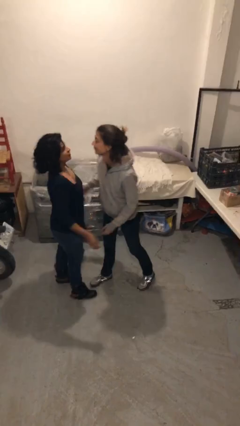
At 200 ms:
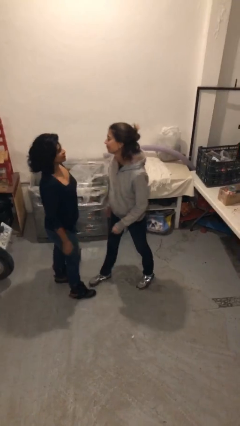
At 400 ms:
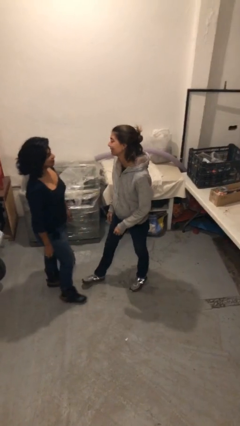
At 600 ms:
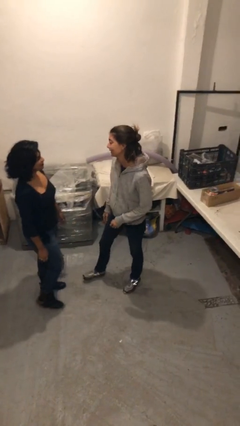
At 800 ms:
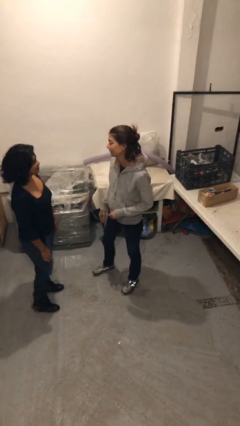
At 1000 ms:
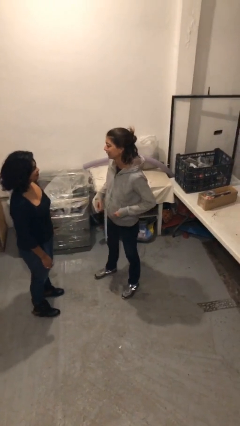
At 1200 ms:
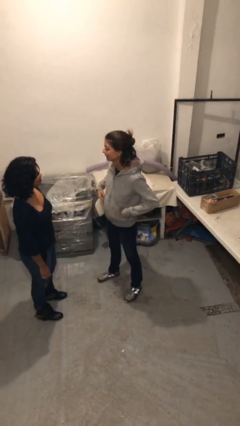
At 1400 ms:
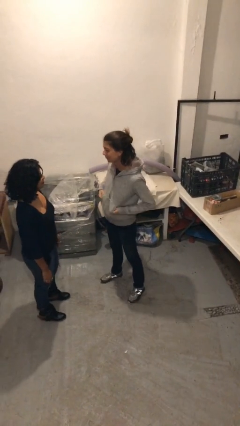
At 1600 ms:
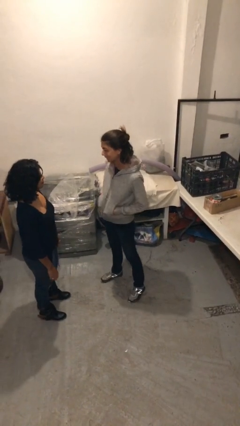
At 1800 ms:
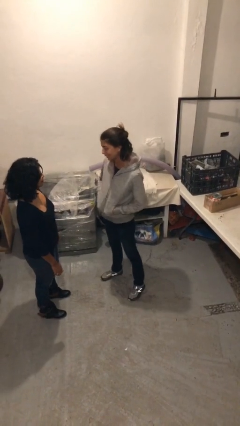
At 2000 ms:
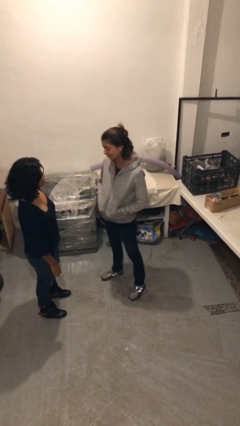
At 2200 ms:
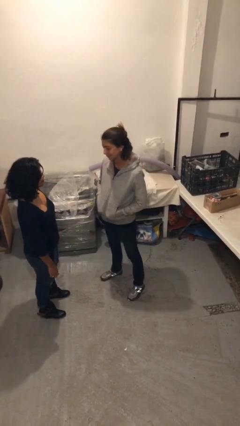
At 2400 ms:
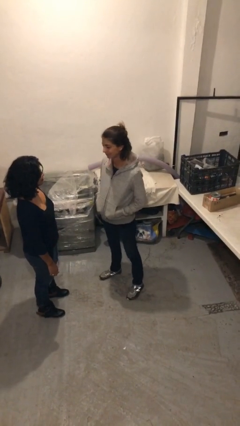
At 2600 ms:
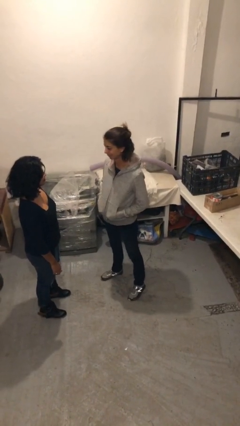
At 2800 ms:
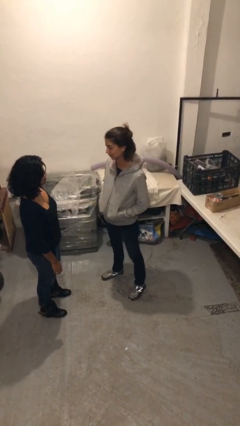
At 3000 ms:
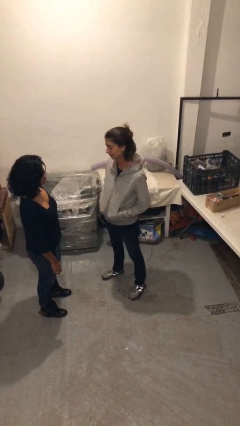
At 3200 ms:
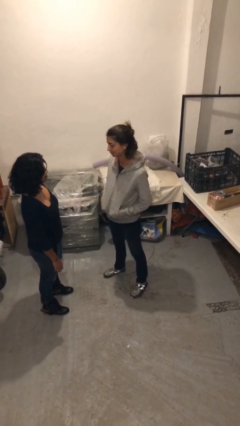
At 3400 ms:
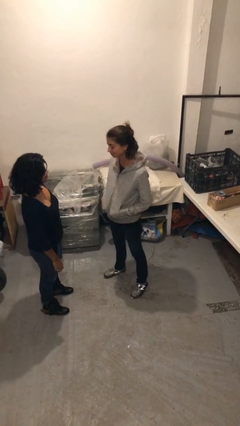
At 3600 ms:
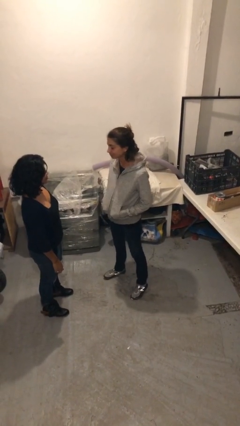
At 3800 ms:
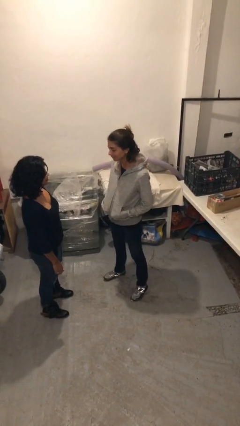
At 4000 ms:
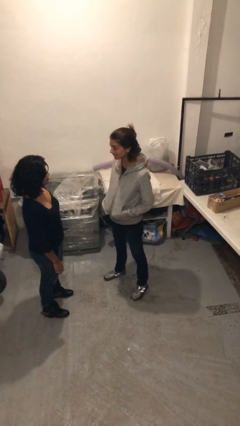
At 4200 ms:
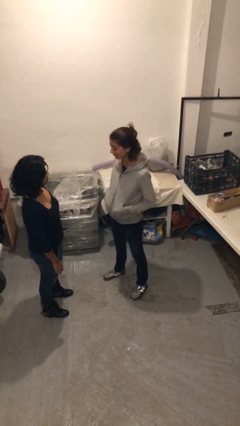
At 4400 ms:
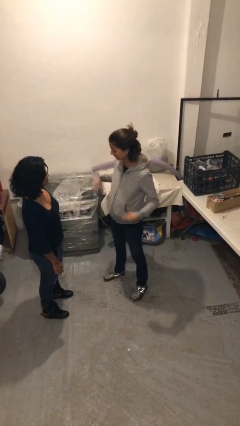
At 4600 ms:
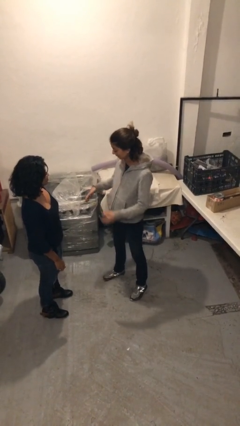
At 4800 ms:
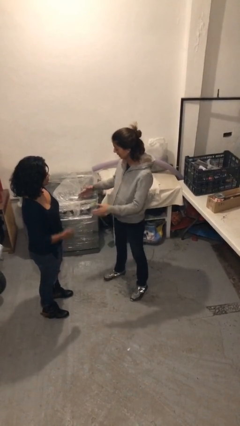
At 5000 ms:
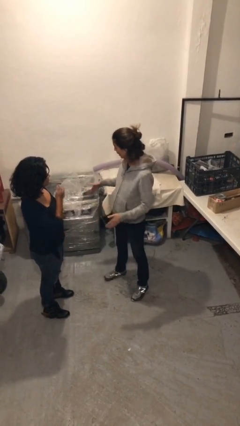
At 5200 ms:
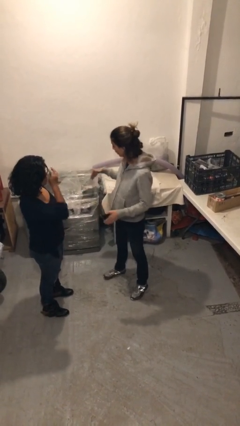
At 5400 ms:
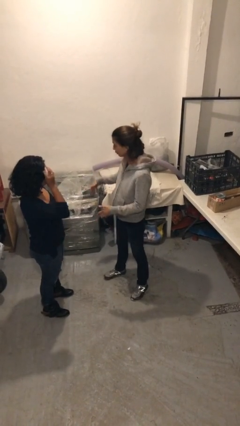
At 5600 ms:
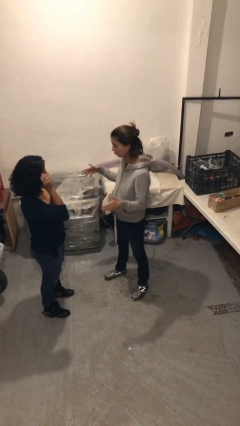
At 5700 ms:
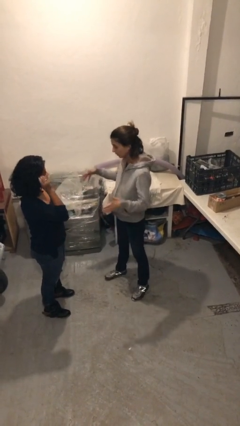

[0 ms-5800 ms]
person talks to person

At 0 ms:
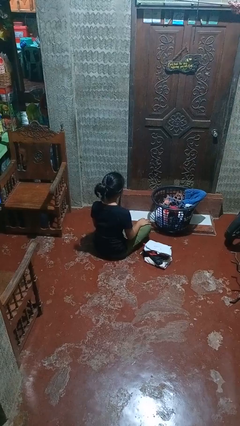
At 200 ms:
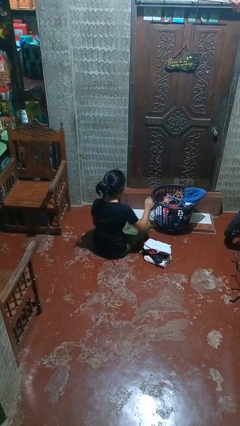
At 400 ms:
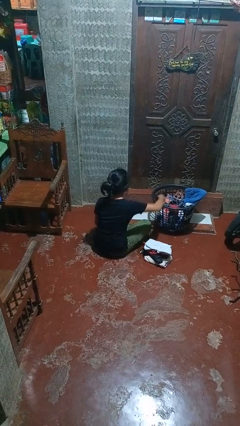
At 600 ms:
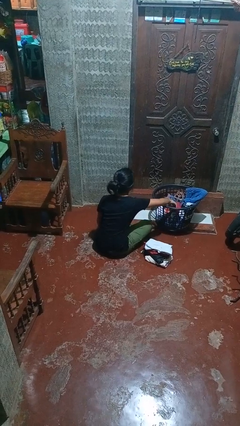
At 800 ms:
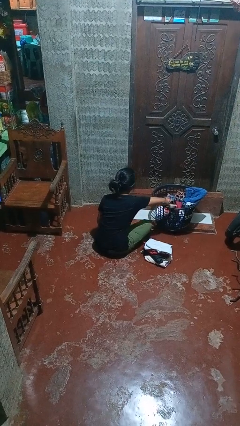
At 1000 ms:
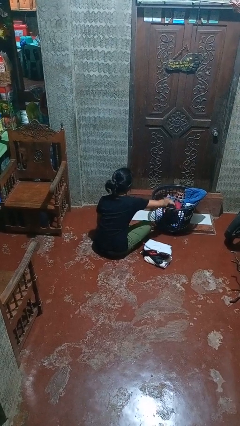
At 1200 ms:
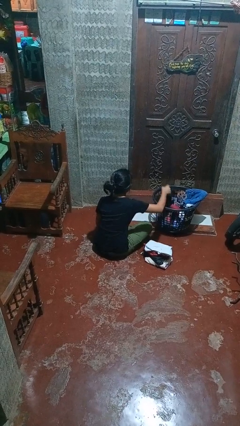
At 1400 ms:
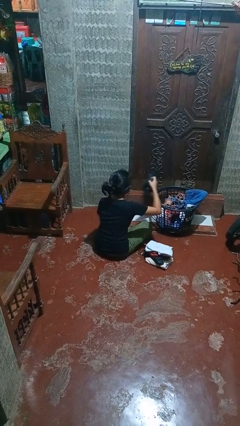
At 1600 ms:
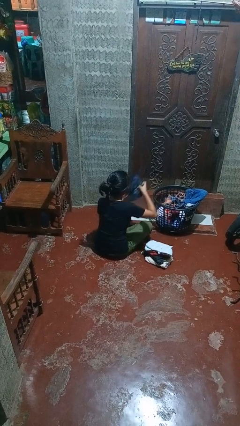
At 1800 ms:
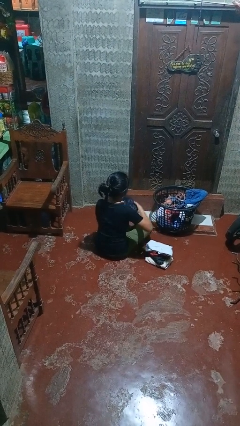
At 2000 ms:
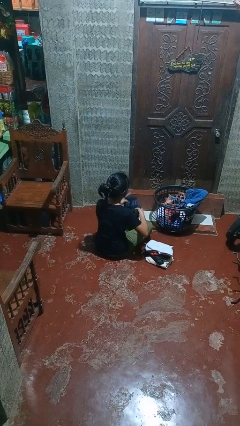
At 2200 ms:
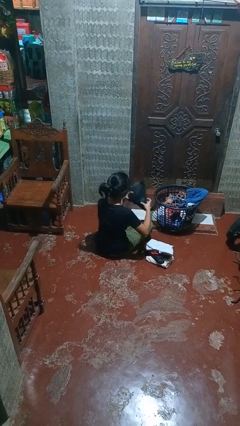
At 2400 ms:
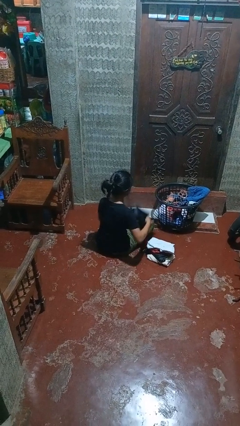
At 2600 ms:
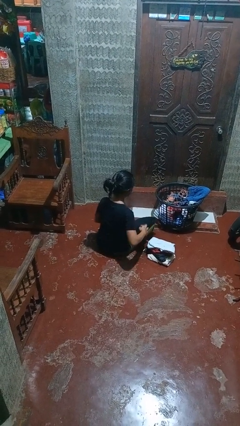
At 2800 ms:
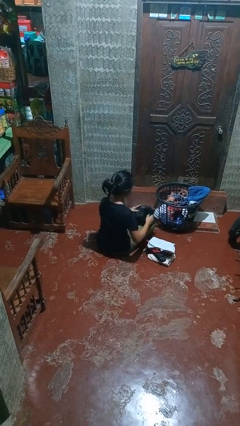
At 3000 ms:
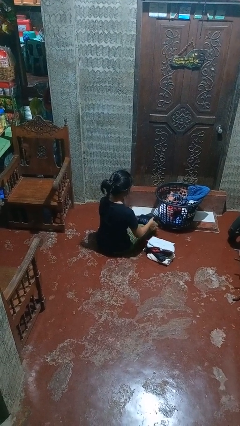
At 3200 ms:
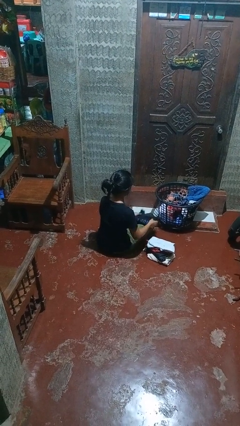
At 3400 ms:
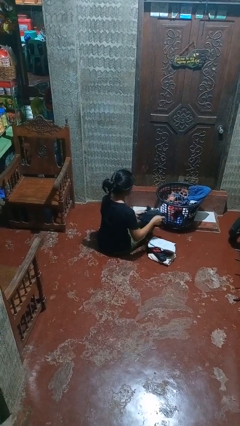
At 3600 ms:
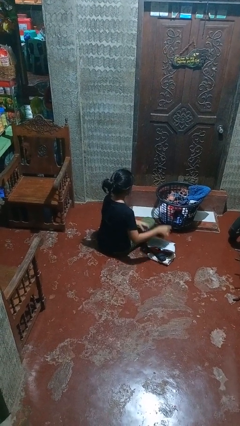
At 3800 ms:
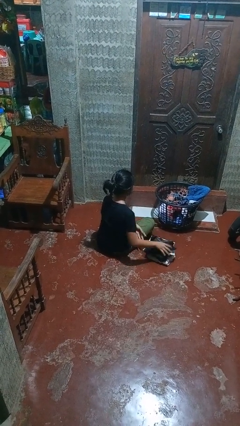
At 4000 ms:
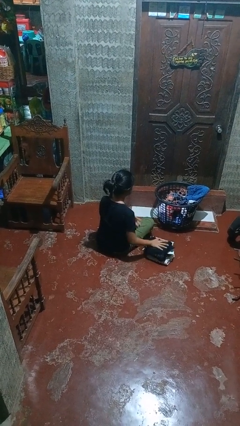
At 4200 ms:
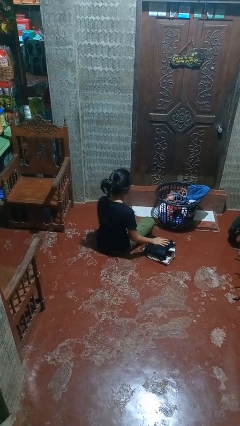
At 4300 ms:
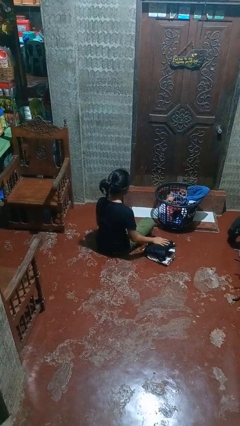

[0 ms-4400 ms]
person folds shirt

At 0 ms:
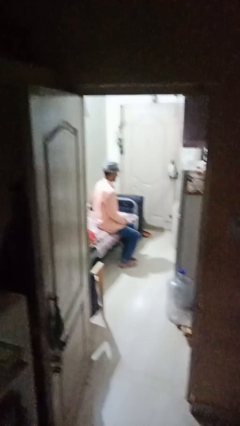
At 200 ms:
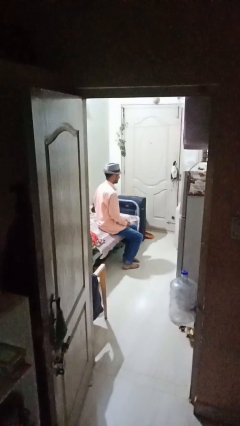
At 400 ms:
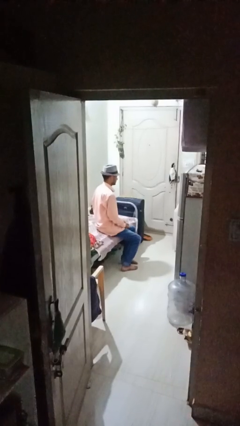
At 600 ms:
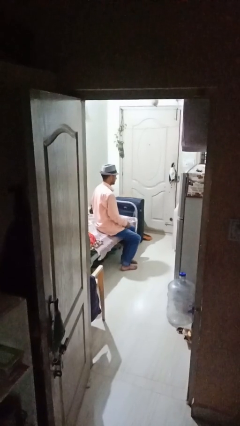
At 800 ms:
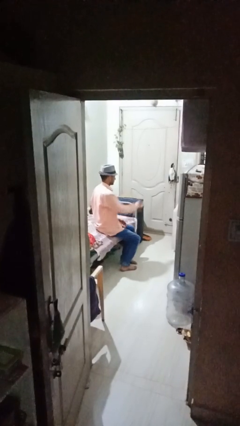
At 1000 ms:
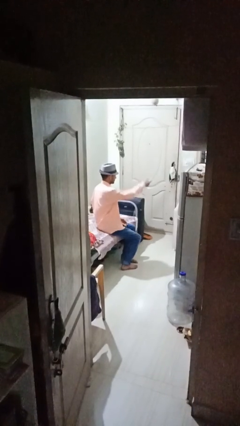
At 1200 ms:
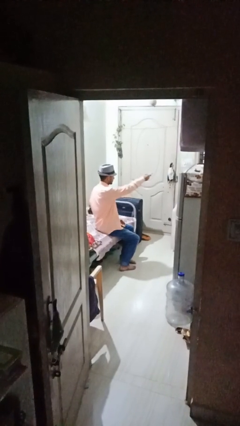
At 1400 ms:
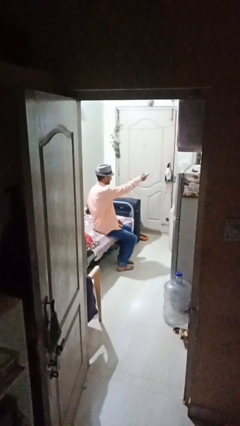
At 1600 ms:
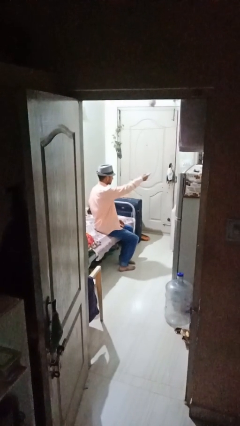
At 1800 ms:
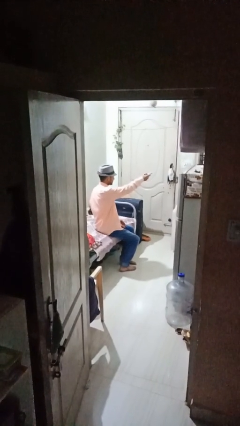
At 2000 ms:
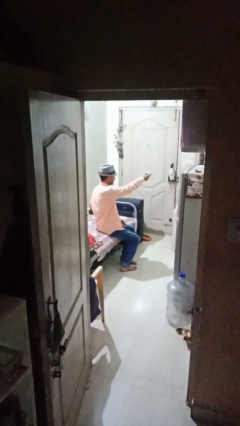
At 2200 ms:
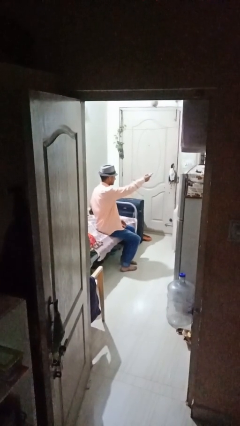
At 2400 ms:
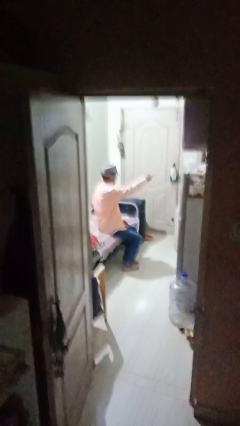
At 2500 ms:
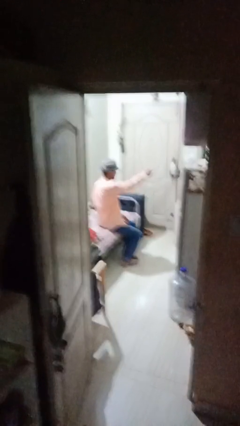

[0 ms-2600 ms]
person uses television remote

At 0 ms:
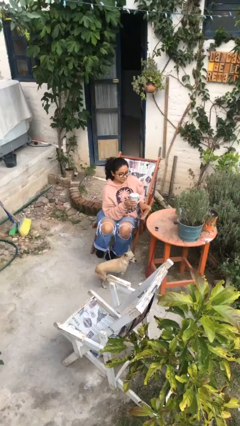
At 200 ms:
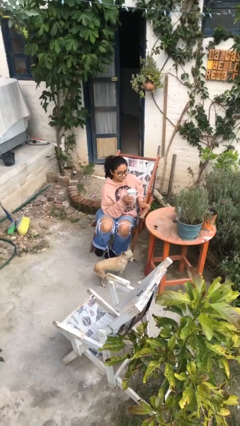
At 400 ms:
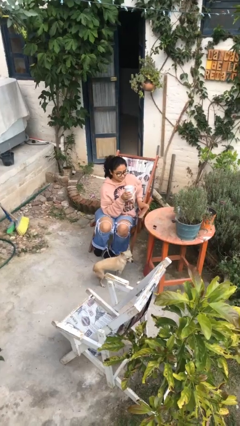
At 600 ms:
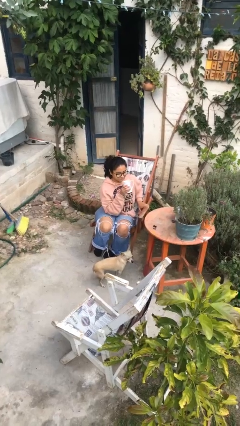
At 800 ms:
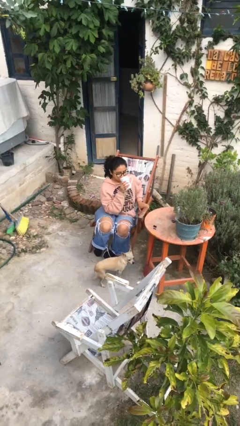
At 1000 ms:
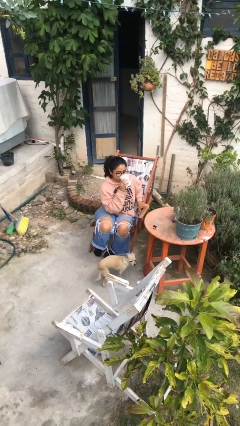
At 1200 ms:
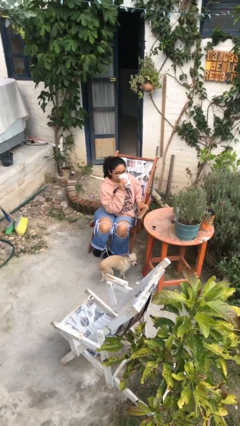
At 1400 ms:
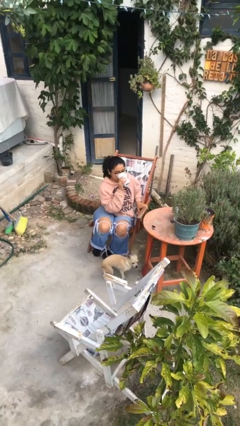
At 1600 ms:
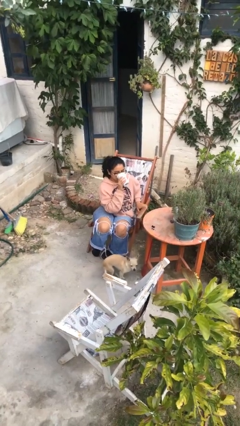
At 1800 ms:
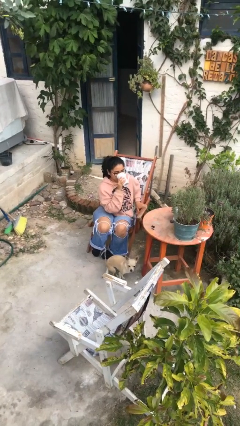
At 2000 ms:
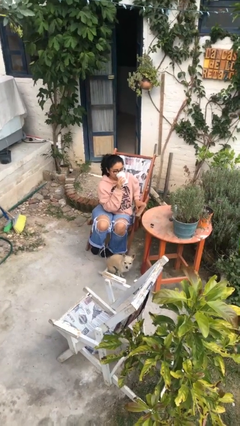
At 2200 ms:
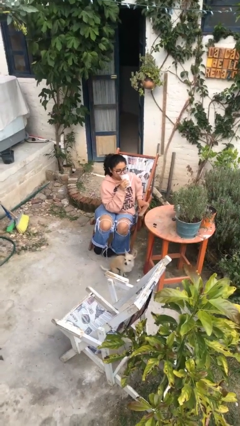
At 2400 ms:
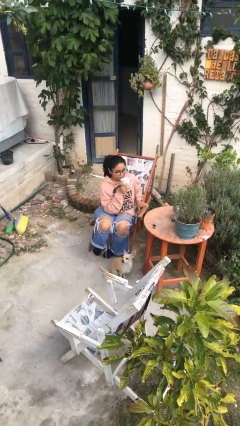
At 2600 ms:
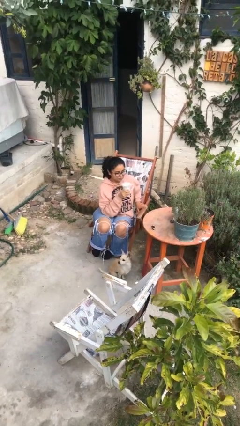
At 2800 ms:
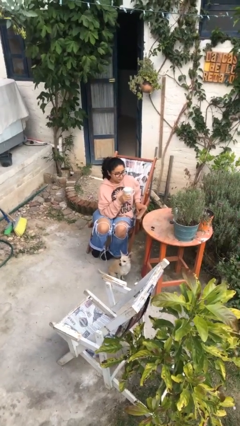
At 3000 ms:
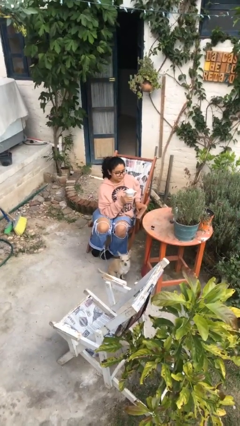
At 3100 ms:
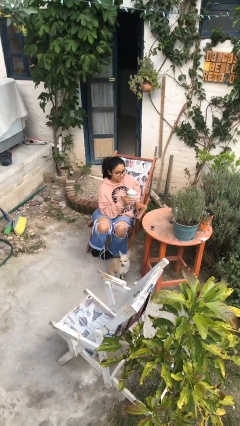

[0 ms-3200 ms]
person drinks from mug

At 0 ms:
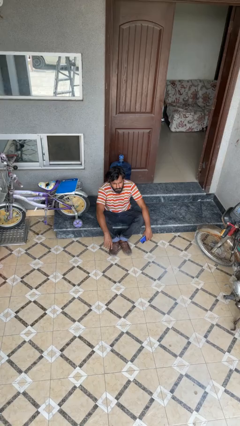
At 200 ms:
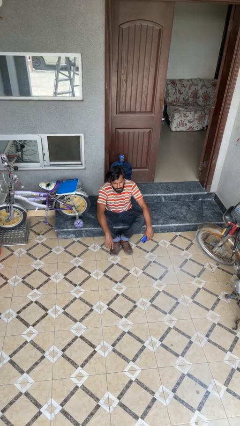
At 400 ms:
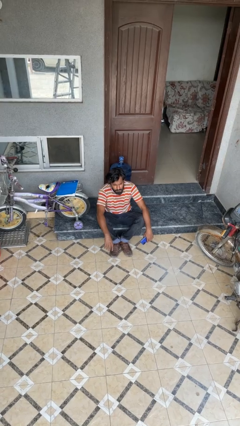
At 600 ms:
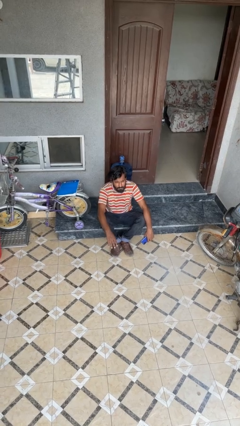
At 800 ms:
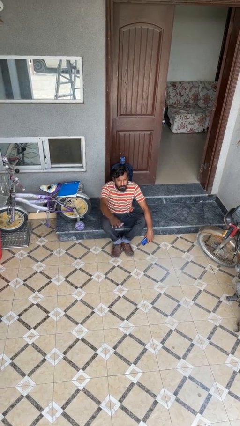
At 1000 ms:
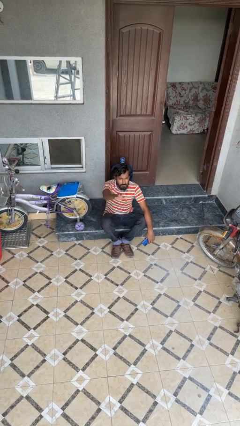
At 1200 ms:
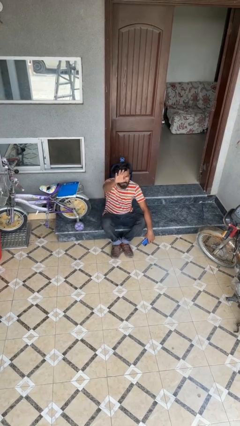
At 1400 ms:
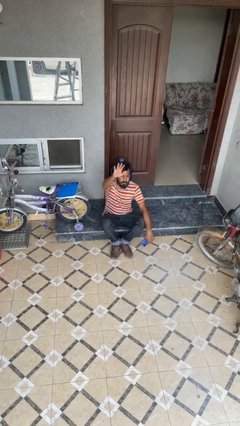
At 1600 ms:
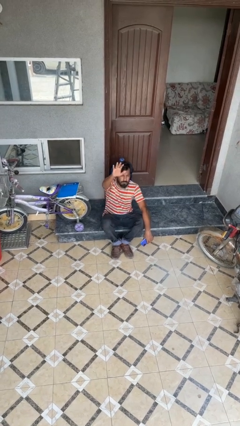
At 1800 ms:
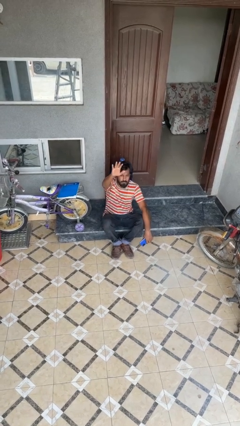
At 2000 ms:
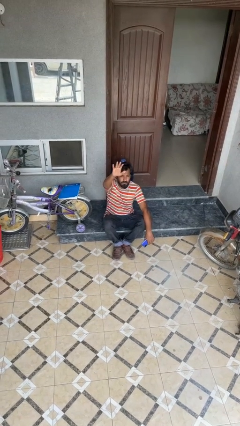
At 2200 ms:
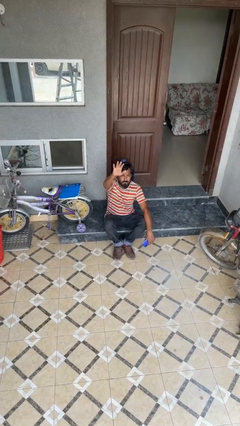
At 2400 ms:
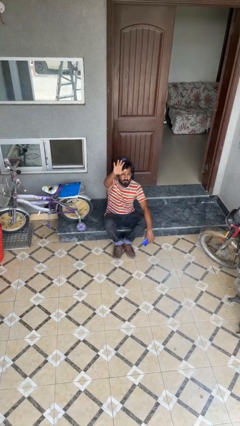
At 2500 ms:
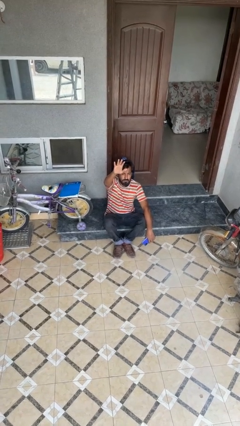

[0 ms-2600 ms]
person gestures raise hand
